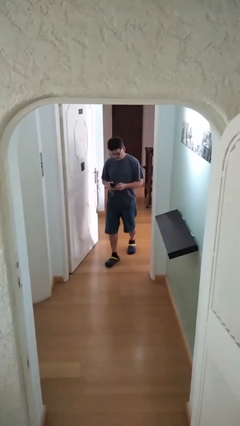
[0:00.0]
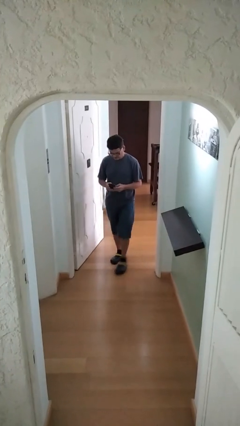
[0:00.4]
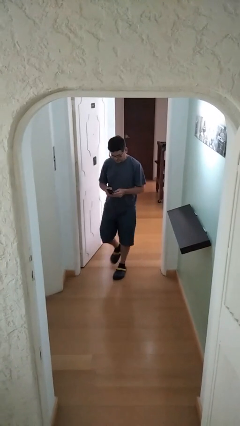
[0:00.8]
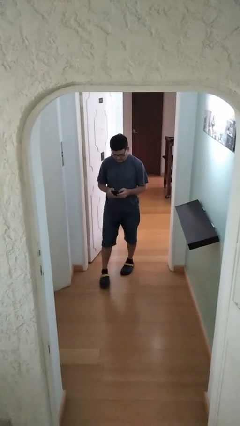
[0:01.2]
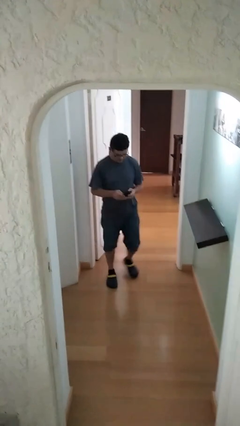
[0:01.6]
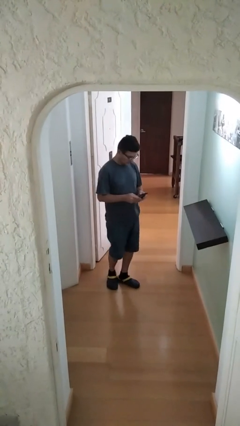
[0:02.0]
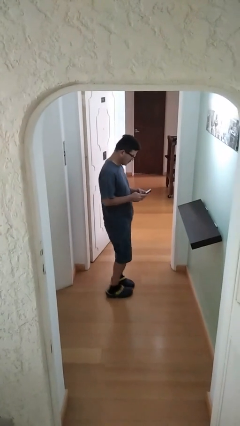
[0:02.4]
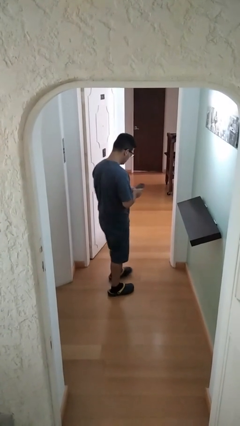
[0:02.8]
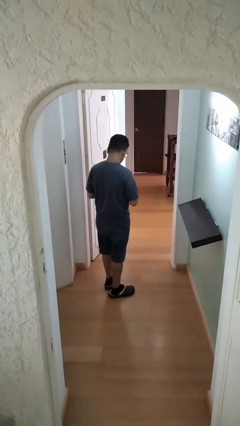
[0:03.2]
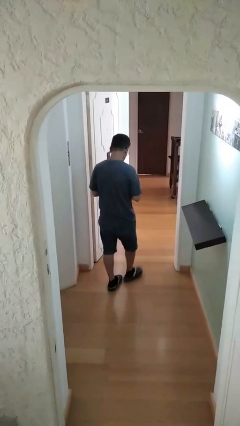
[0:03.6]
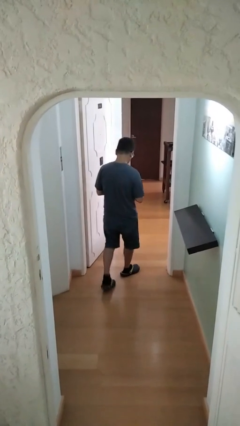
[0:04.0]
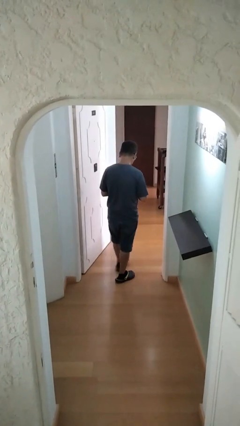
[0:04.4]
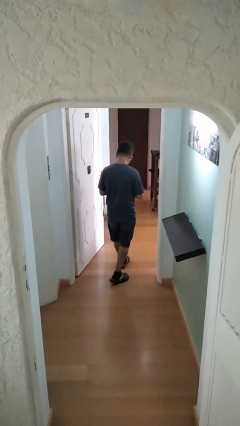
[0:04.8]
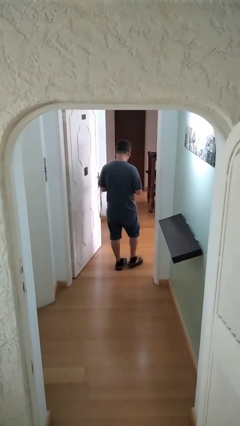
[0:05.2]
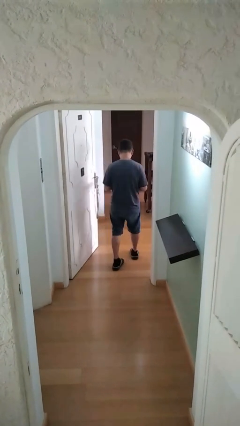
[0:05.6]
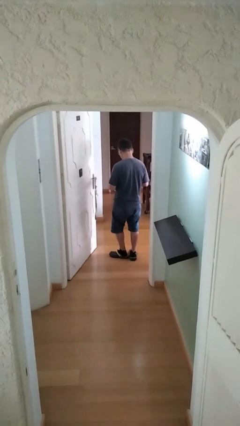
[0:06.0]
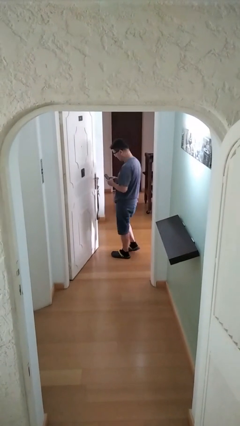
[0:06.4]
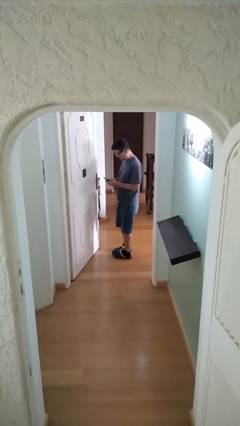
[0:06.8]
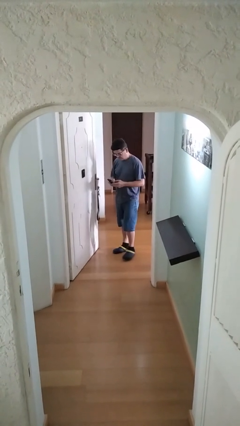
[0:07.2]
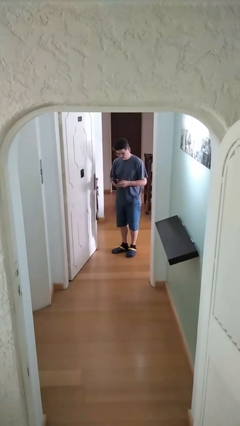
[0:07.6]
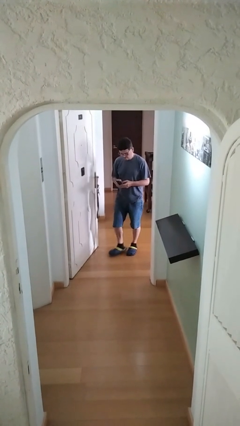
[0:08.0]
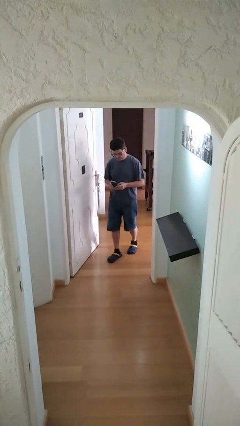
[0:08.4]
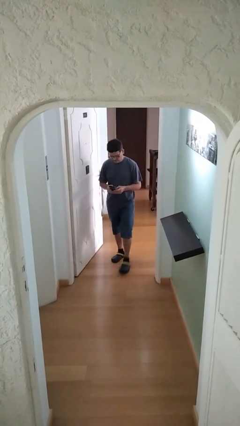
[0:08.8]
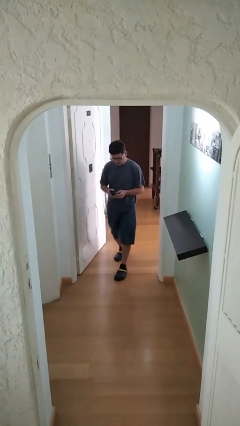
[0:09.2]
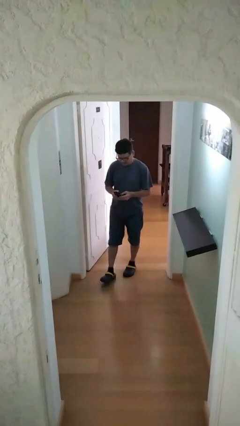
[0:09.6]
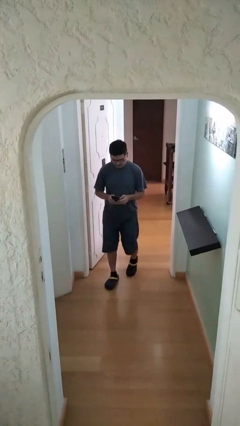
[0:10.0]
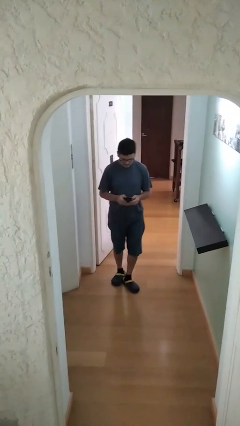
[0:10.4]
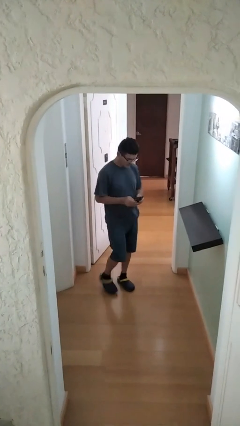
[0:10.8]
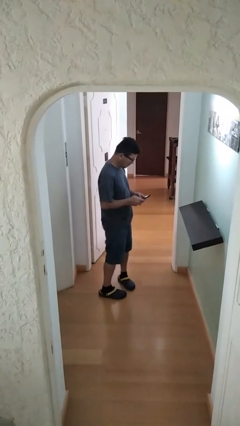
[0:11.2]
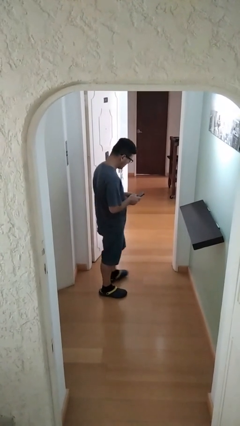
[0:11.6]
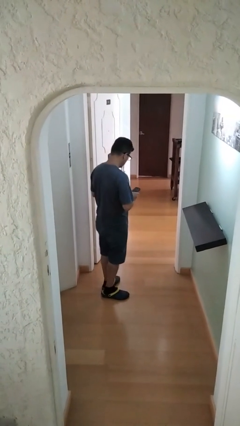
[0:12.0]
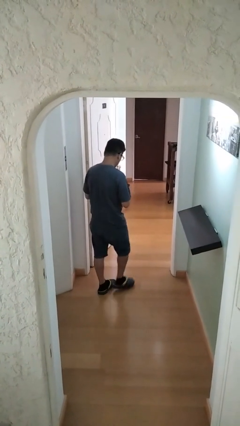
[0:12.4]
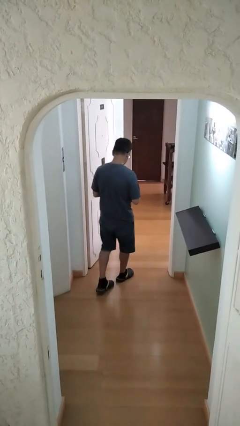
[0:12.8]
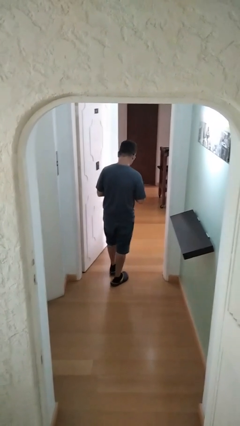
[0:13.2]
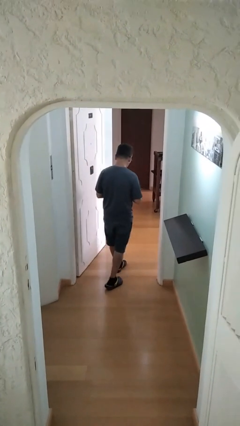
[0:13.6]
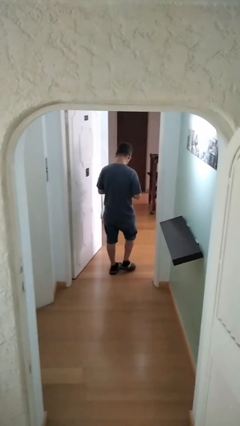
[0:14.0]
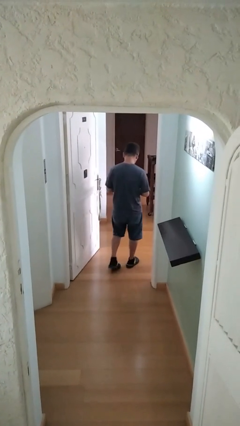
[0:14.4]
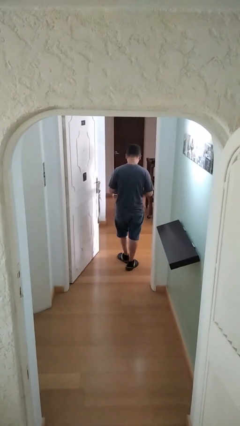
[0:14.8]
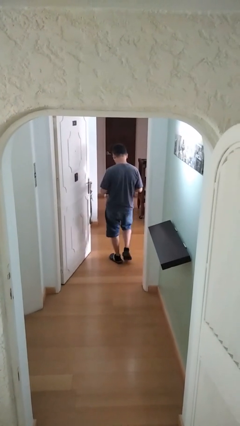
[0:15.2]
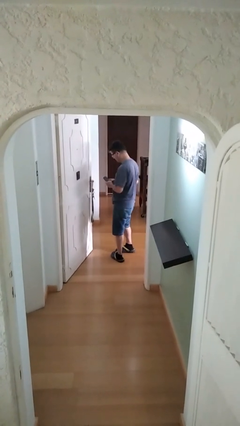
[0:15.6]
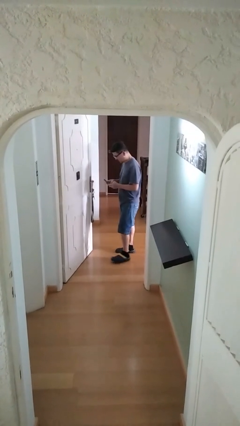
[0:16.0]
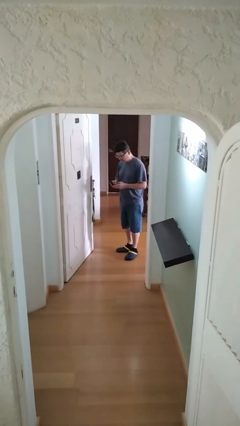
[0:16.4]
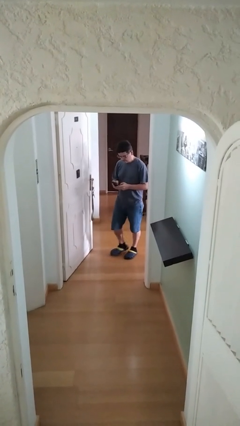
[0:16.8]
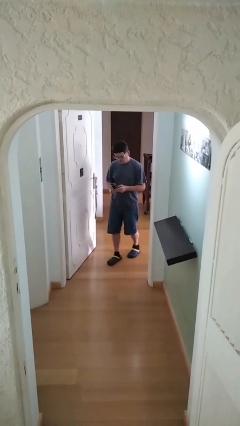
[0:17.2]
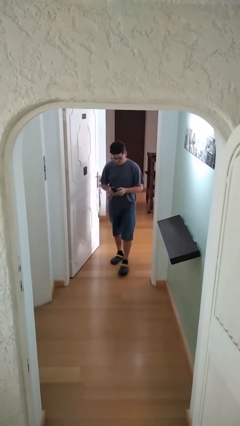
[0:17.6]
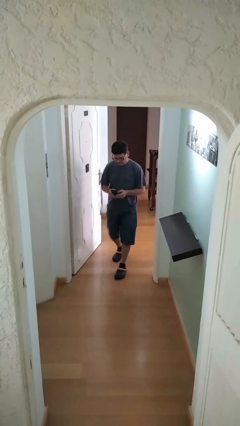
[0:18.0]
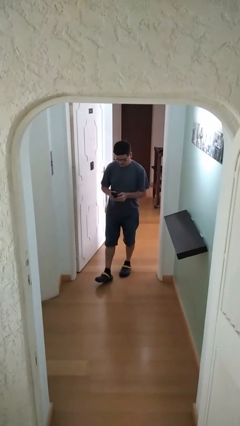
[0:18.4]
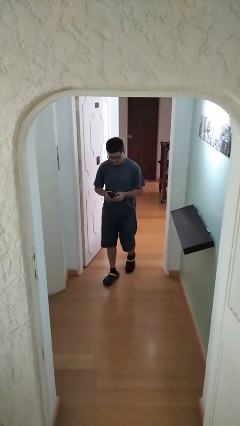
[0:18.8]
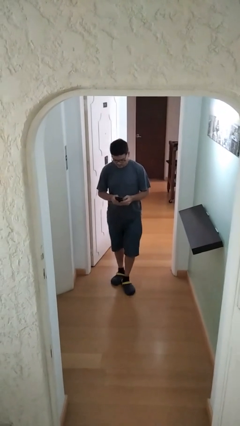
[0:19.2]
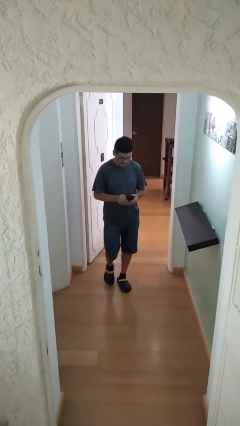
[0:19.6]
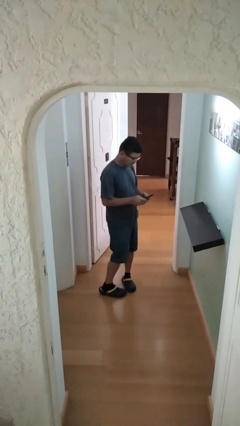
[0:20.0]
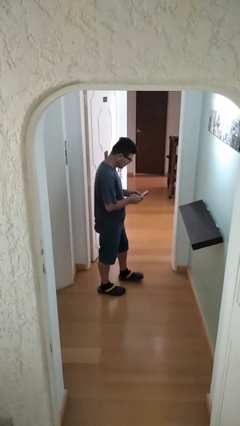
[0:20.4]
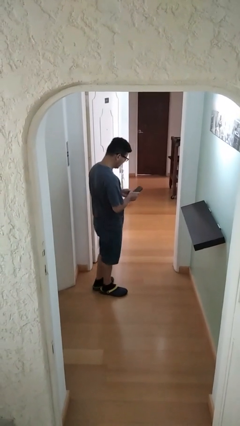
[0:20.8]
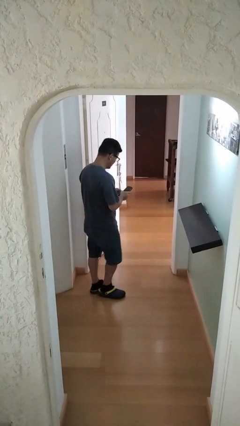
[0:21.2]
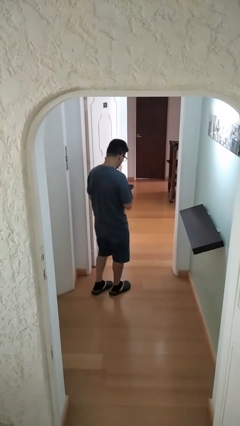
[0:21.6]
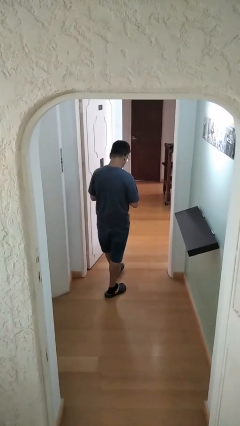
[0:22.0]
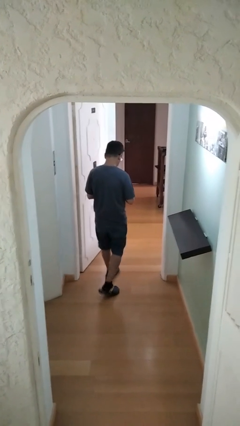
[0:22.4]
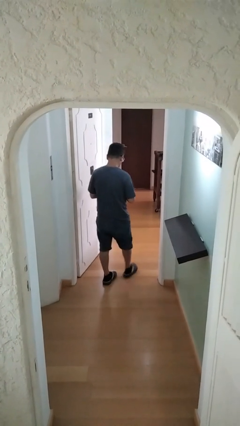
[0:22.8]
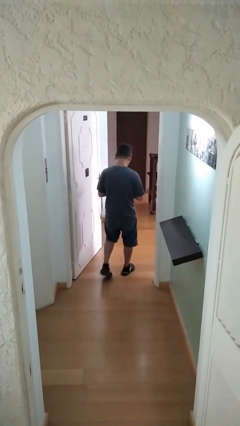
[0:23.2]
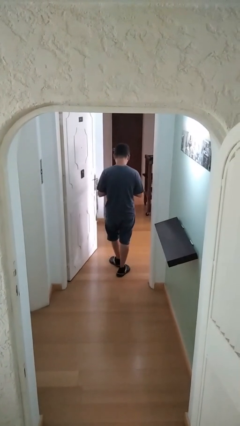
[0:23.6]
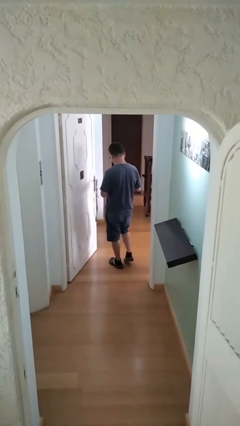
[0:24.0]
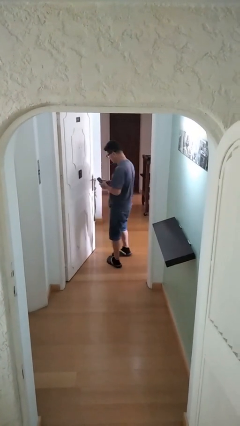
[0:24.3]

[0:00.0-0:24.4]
person texts on phone

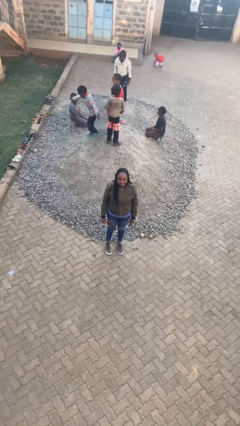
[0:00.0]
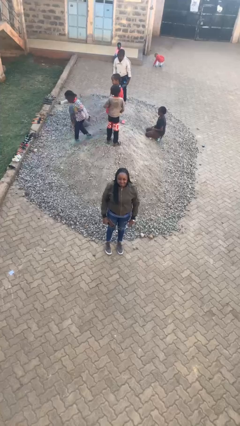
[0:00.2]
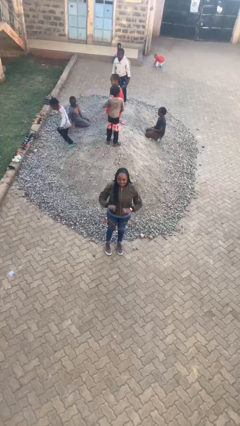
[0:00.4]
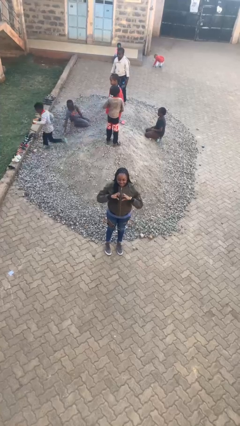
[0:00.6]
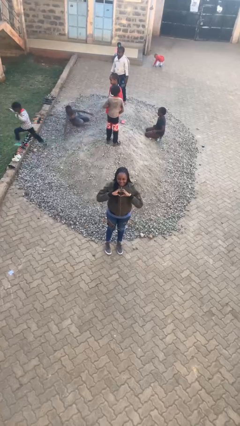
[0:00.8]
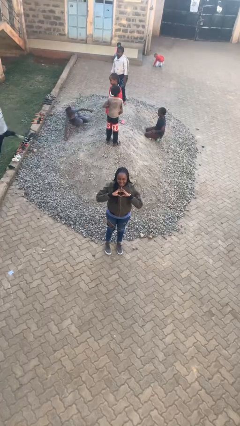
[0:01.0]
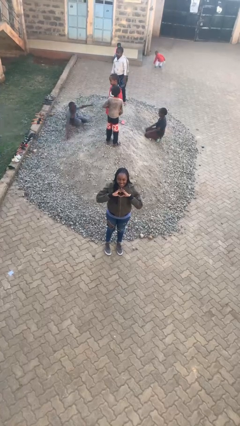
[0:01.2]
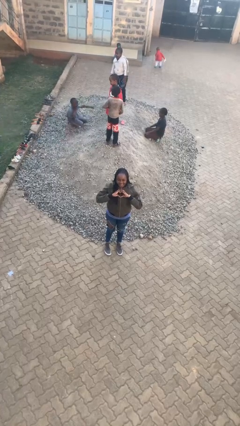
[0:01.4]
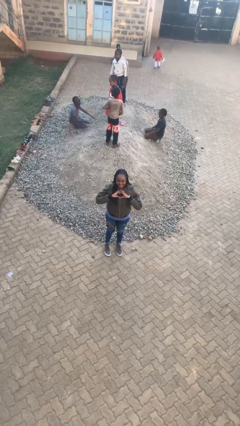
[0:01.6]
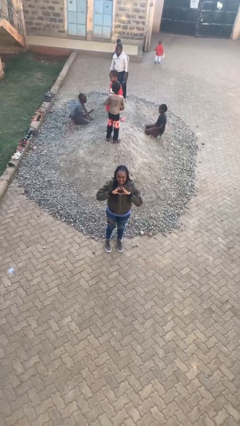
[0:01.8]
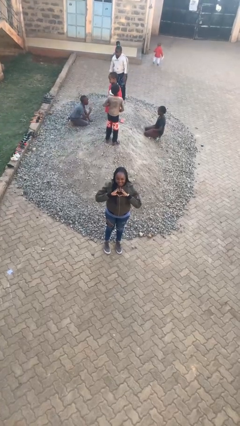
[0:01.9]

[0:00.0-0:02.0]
person gestures heart

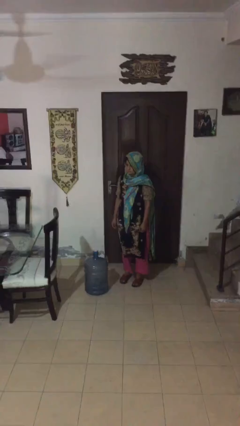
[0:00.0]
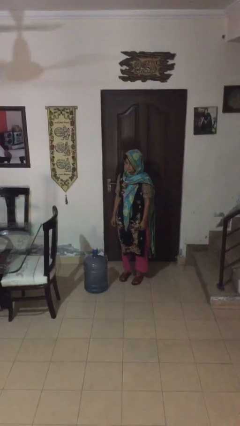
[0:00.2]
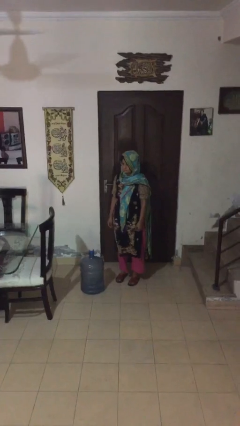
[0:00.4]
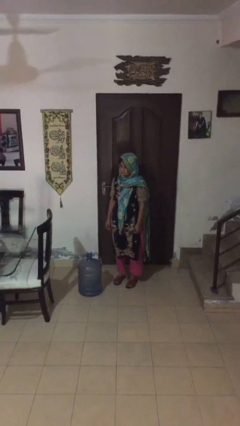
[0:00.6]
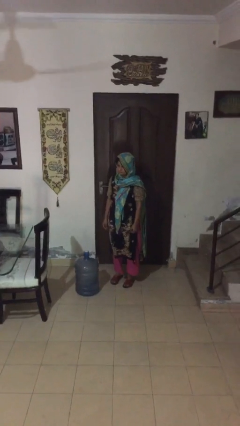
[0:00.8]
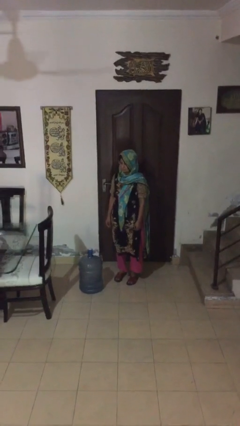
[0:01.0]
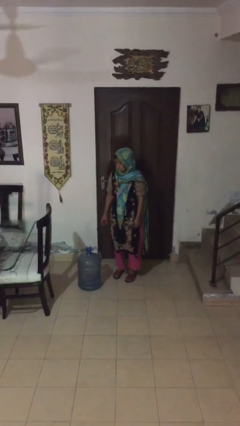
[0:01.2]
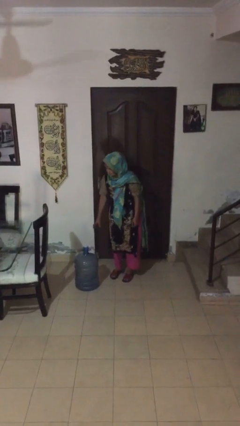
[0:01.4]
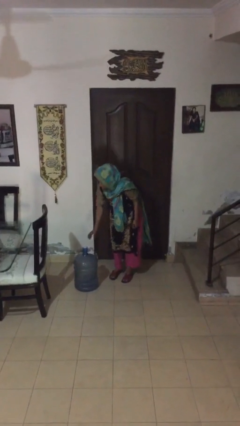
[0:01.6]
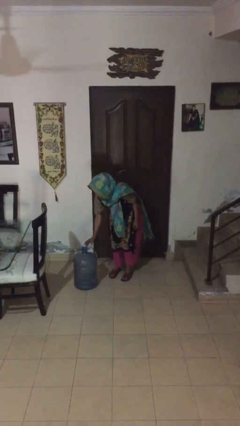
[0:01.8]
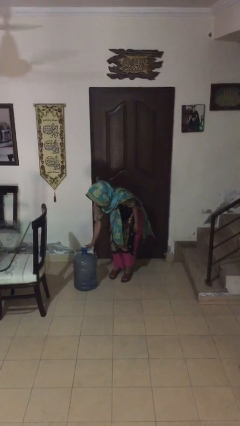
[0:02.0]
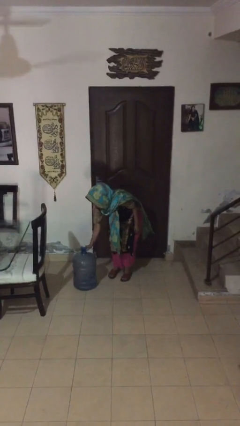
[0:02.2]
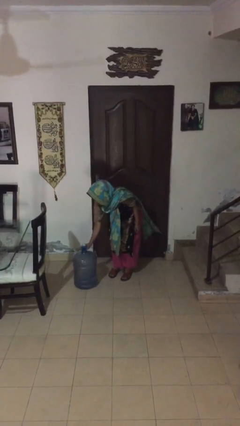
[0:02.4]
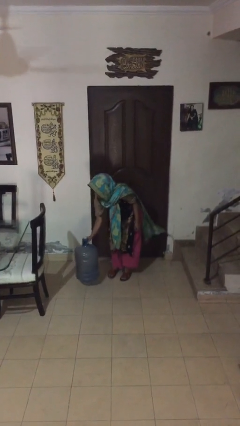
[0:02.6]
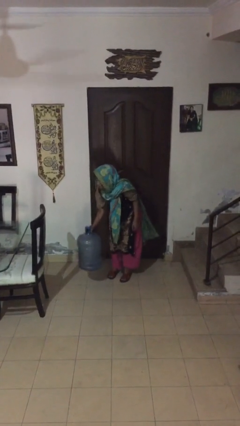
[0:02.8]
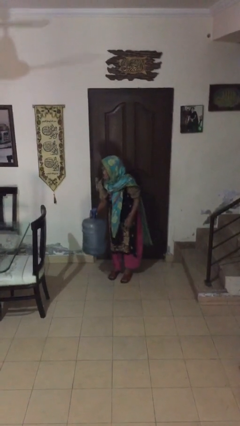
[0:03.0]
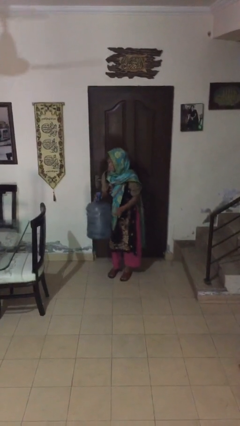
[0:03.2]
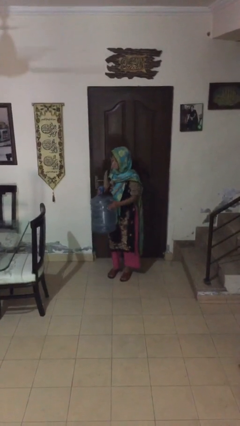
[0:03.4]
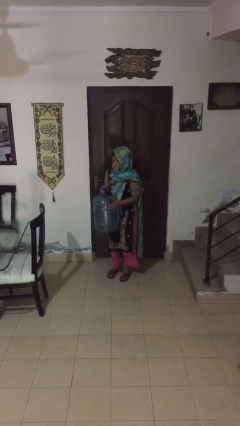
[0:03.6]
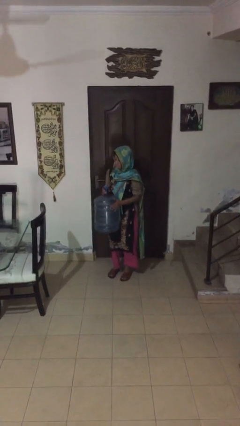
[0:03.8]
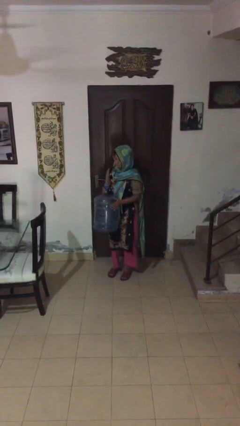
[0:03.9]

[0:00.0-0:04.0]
person carries heavy object
